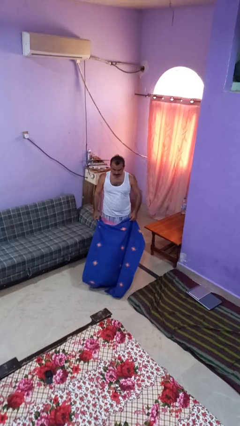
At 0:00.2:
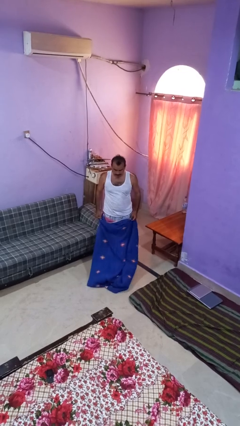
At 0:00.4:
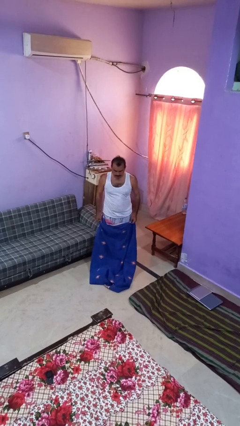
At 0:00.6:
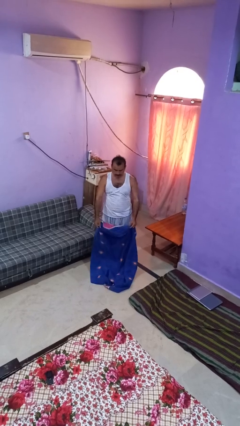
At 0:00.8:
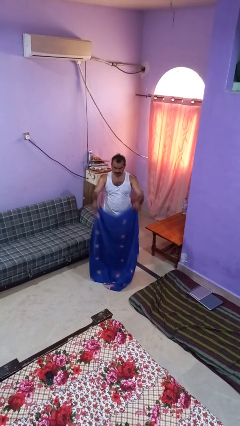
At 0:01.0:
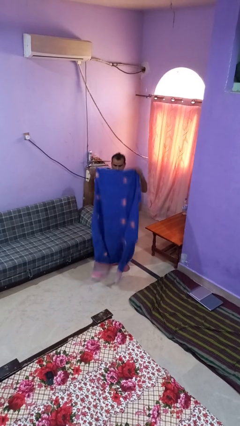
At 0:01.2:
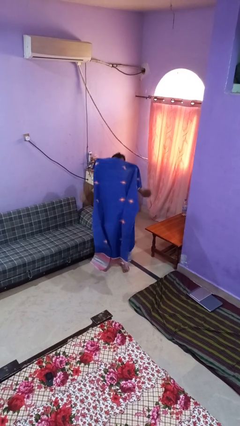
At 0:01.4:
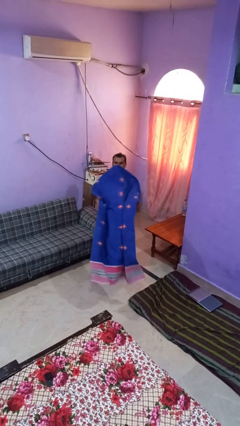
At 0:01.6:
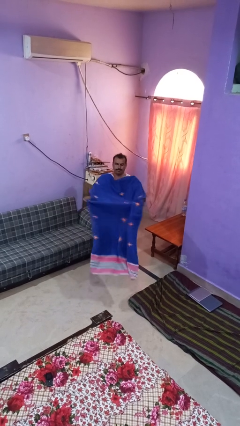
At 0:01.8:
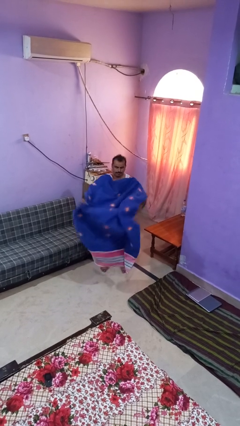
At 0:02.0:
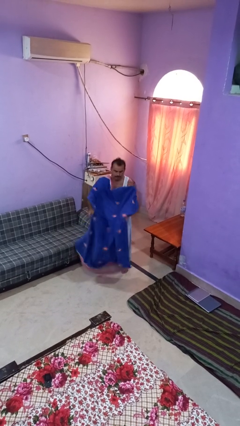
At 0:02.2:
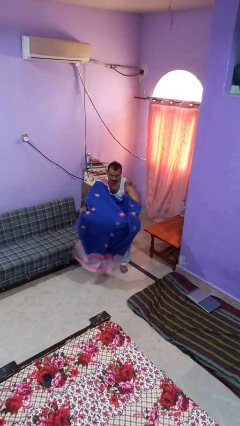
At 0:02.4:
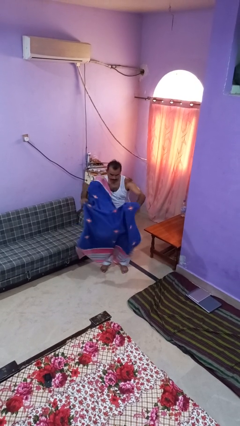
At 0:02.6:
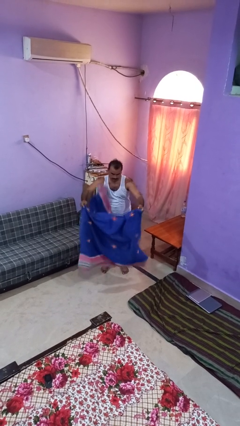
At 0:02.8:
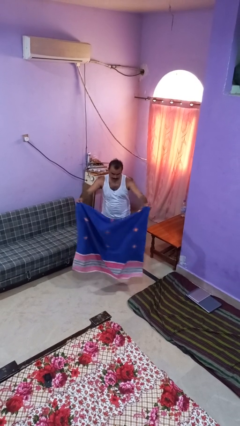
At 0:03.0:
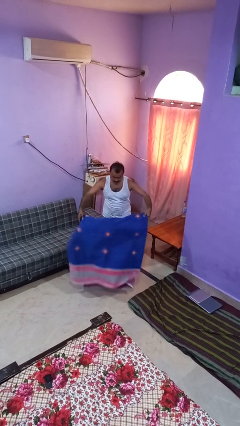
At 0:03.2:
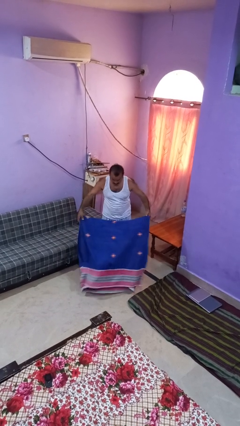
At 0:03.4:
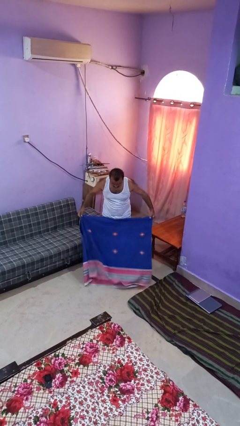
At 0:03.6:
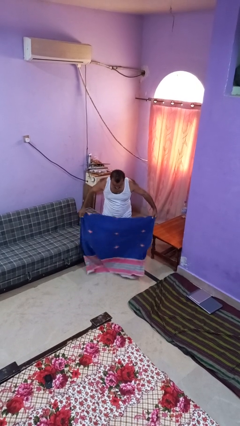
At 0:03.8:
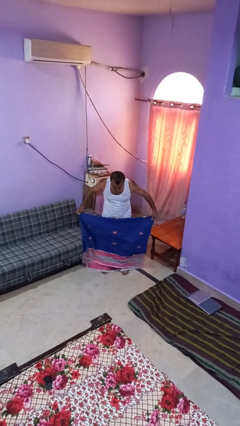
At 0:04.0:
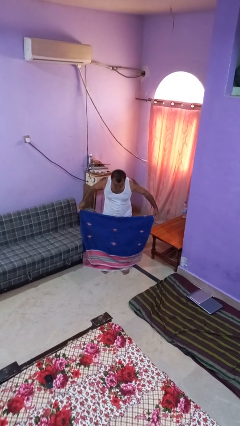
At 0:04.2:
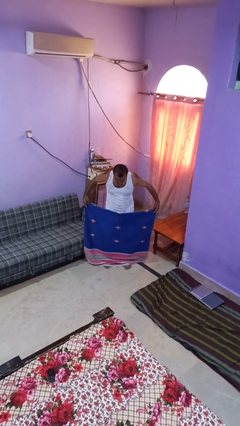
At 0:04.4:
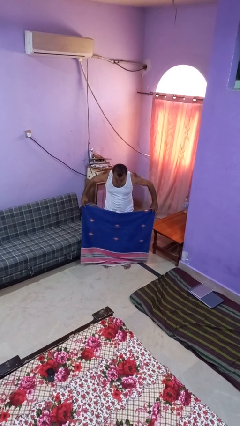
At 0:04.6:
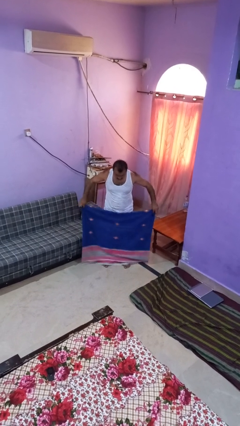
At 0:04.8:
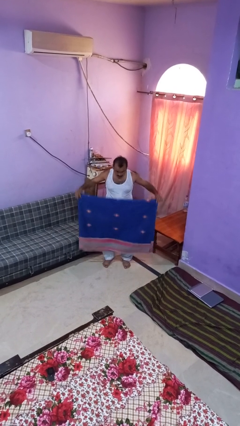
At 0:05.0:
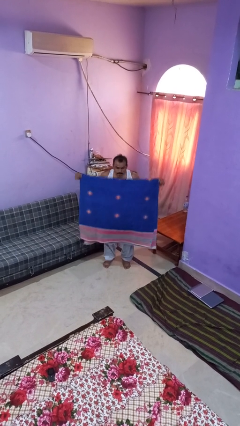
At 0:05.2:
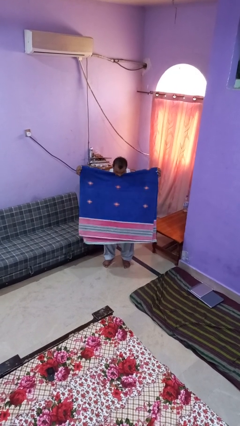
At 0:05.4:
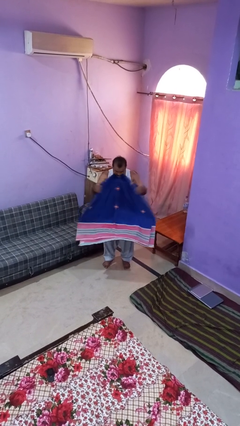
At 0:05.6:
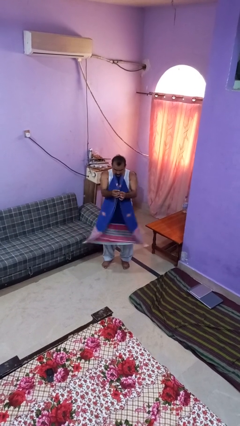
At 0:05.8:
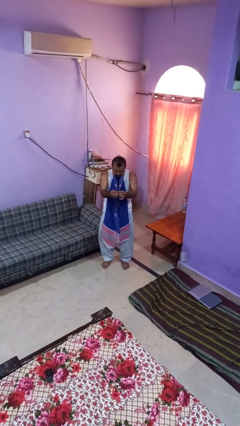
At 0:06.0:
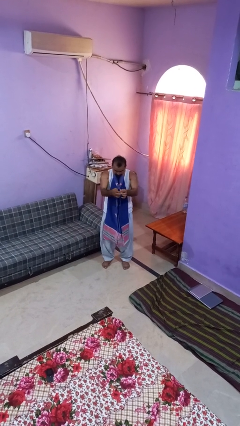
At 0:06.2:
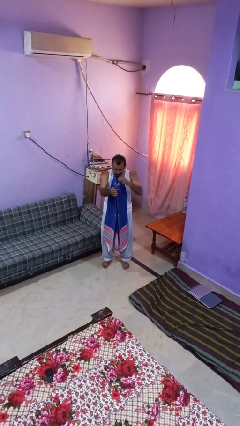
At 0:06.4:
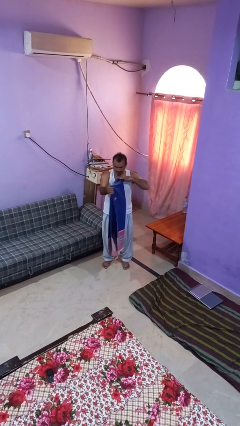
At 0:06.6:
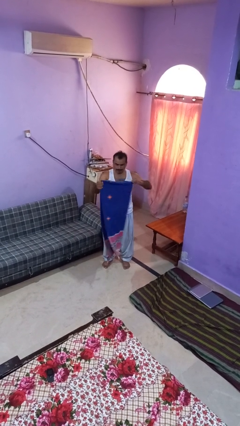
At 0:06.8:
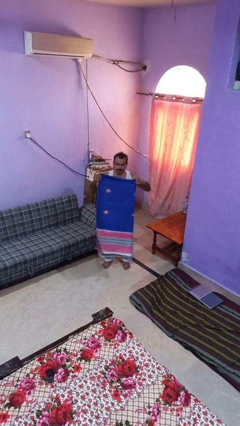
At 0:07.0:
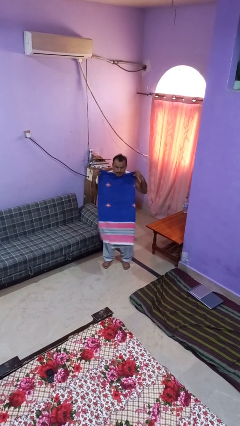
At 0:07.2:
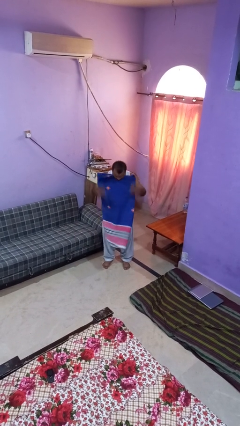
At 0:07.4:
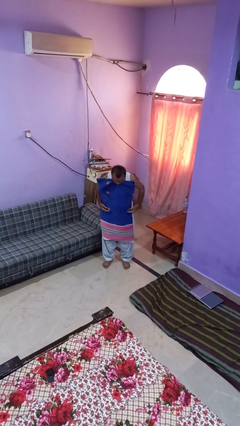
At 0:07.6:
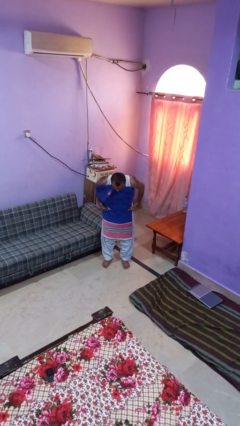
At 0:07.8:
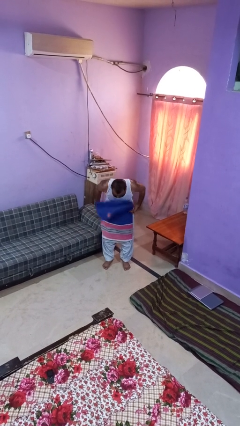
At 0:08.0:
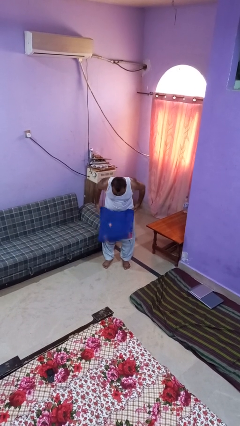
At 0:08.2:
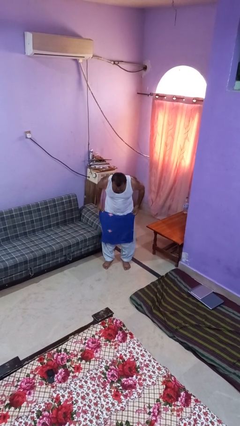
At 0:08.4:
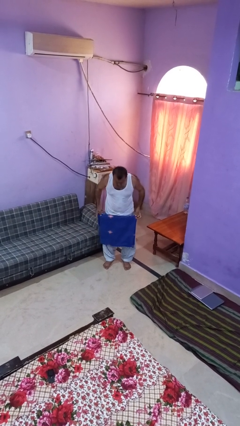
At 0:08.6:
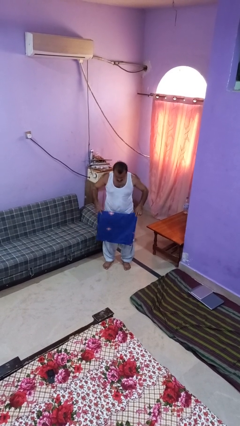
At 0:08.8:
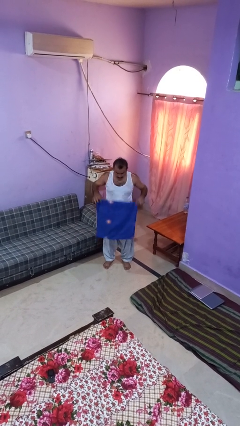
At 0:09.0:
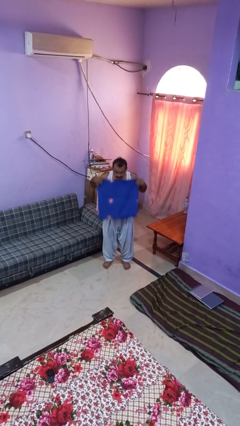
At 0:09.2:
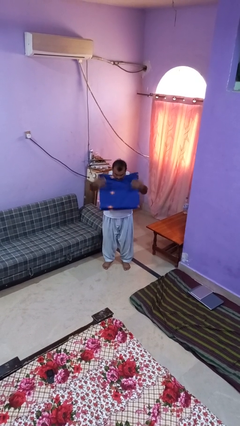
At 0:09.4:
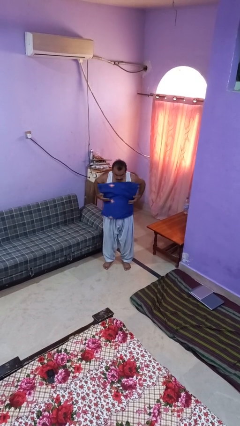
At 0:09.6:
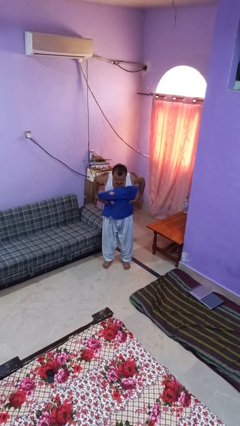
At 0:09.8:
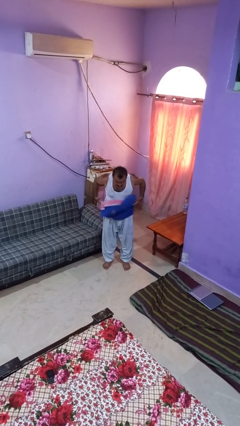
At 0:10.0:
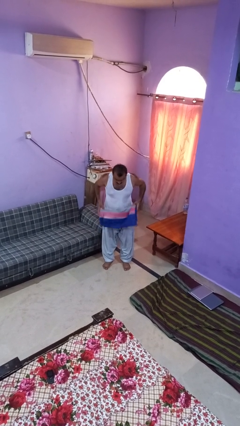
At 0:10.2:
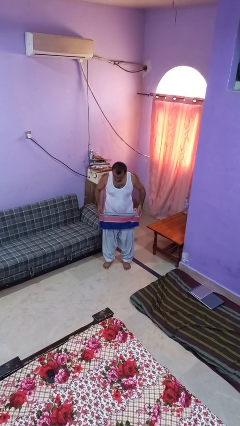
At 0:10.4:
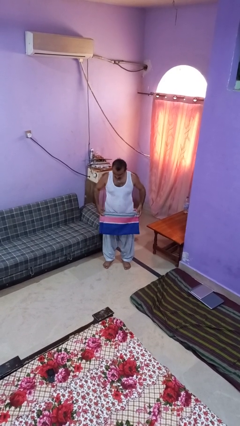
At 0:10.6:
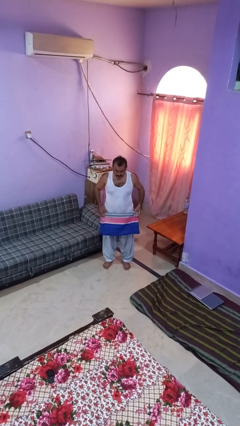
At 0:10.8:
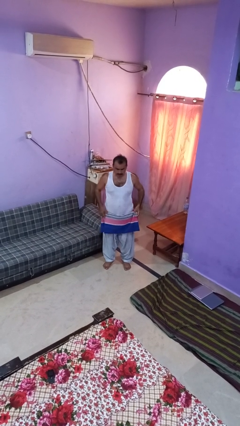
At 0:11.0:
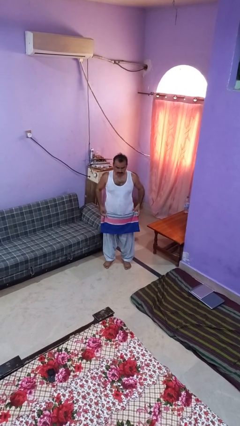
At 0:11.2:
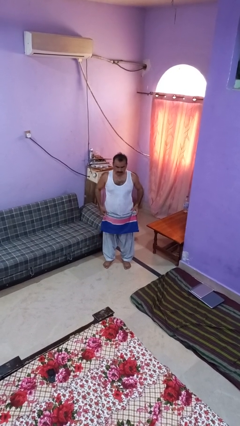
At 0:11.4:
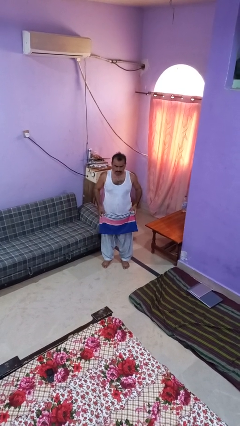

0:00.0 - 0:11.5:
person folds blanket

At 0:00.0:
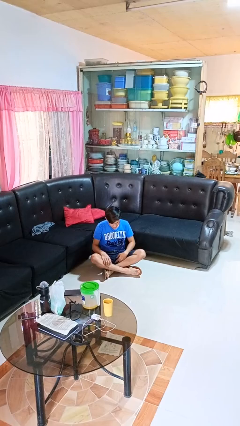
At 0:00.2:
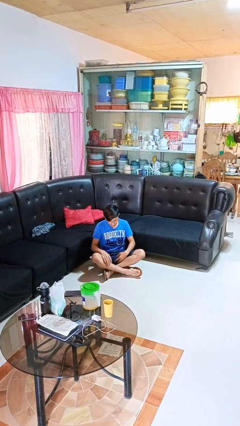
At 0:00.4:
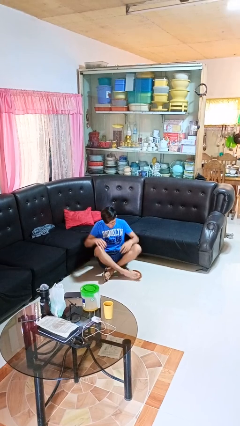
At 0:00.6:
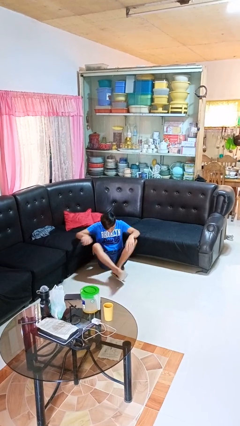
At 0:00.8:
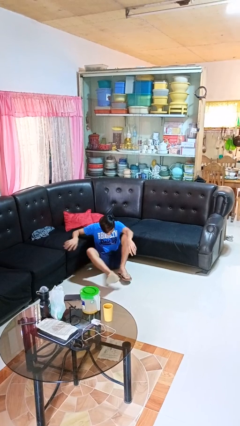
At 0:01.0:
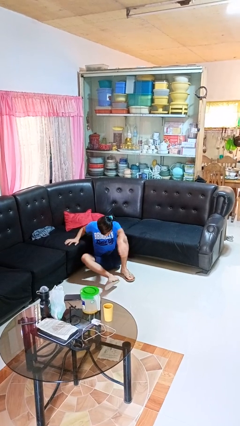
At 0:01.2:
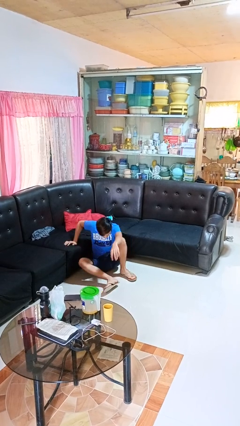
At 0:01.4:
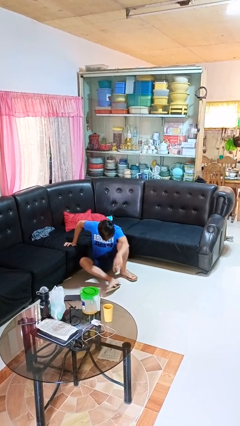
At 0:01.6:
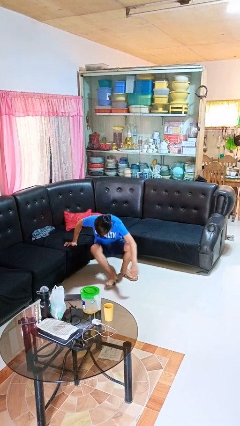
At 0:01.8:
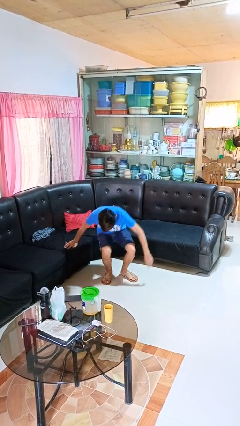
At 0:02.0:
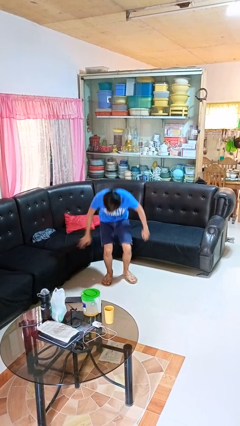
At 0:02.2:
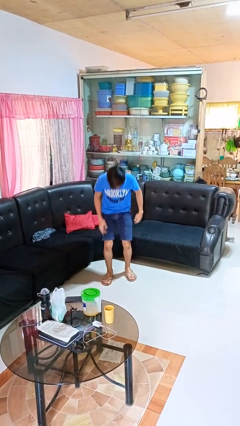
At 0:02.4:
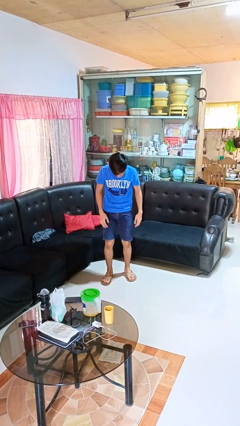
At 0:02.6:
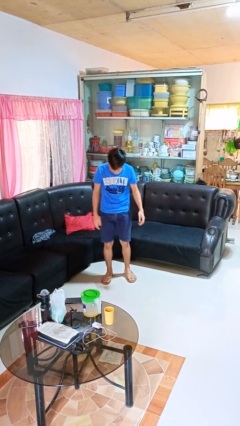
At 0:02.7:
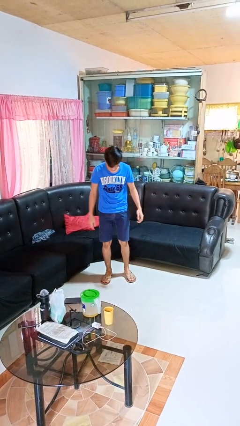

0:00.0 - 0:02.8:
person stands up from floor

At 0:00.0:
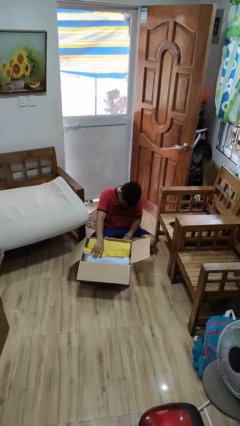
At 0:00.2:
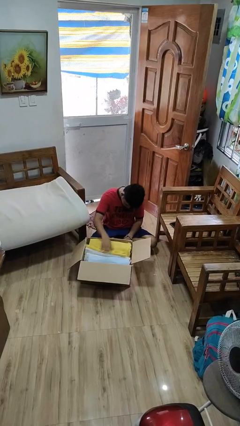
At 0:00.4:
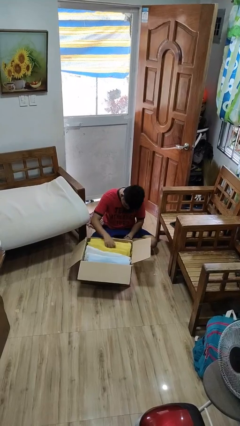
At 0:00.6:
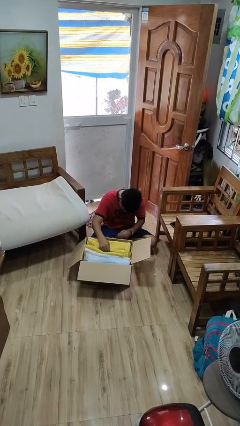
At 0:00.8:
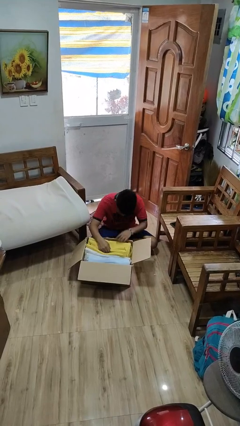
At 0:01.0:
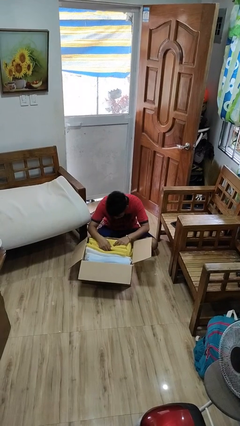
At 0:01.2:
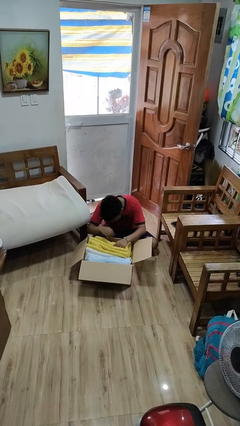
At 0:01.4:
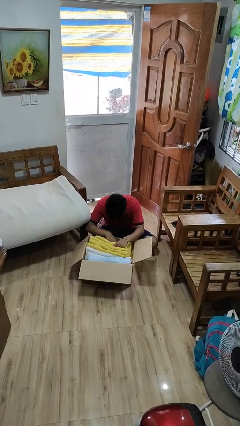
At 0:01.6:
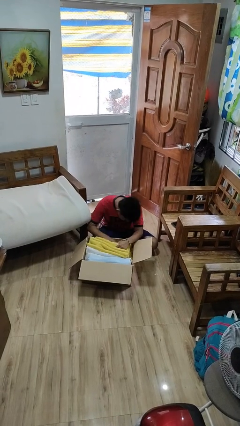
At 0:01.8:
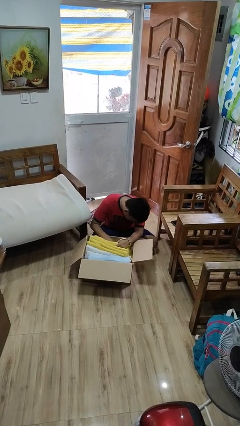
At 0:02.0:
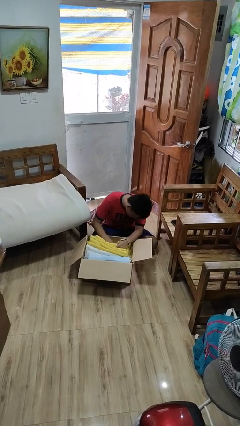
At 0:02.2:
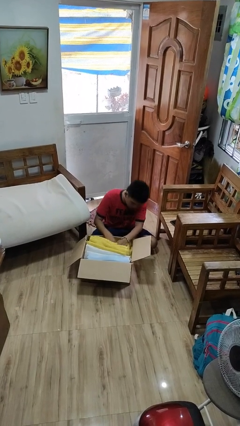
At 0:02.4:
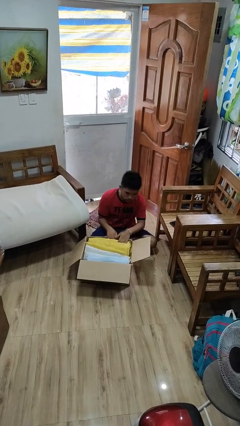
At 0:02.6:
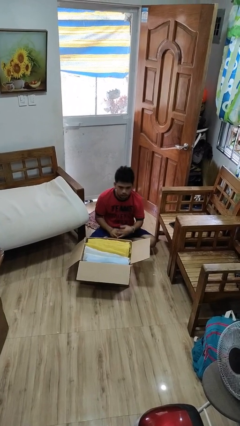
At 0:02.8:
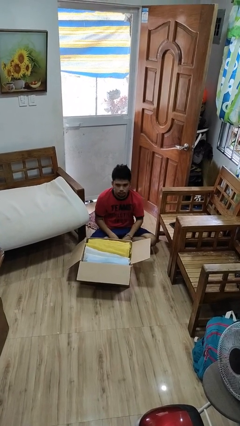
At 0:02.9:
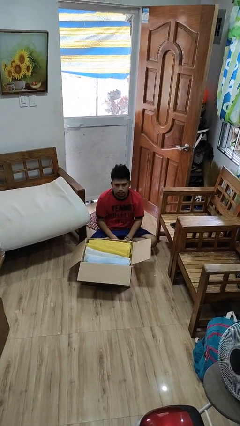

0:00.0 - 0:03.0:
person searches in box

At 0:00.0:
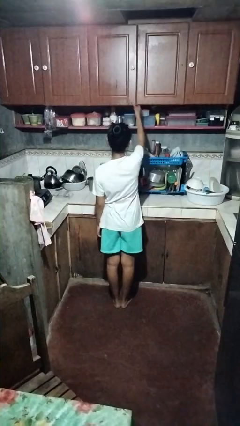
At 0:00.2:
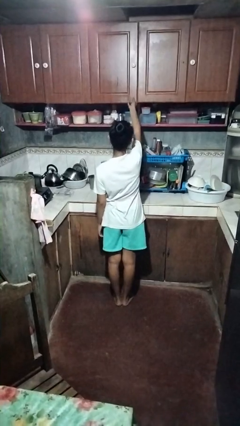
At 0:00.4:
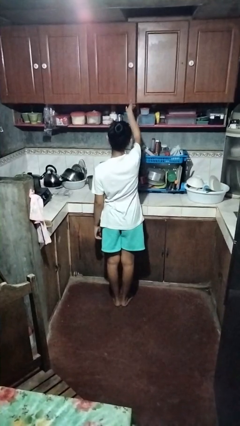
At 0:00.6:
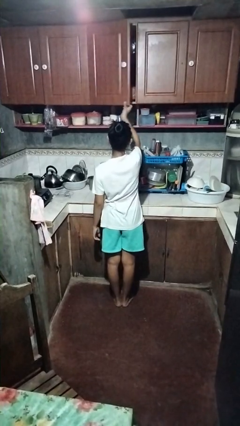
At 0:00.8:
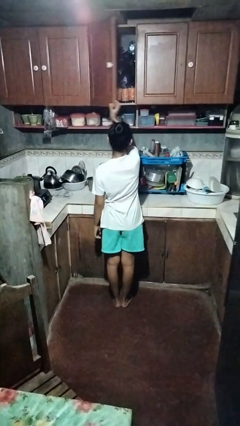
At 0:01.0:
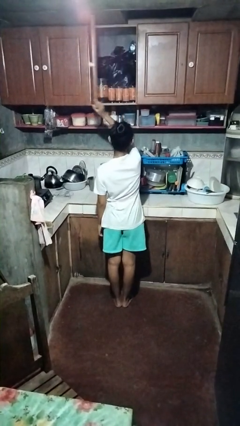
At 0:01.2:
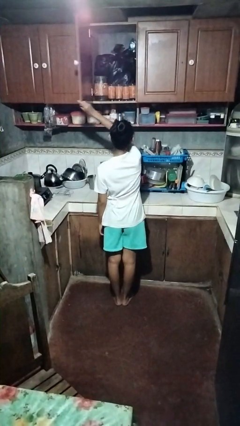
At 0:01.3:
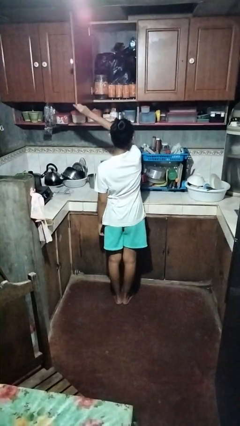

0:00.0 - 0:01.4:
person opens cabinet
